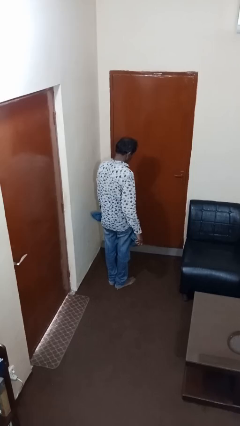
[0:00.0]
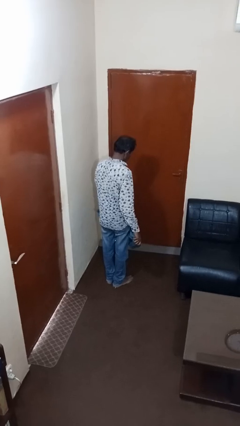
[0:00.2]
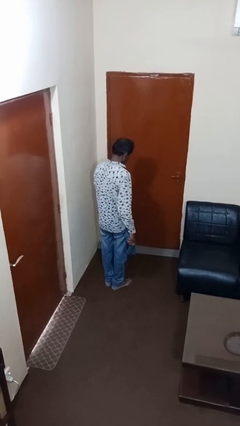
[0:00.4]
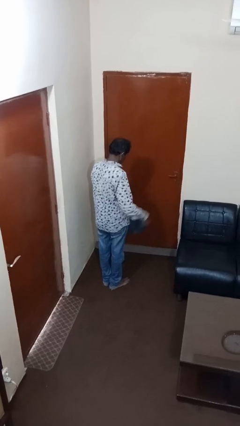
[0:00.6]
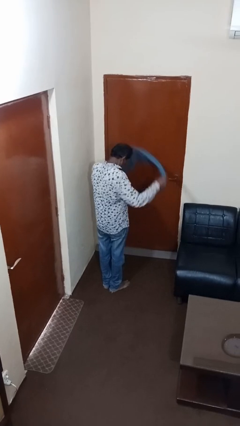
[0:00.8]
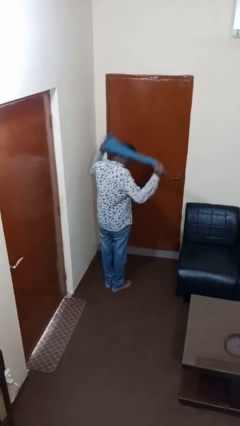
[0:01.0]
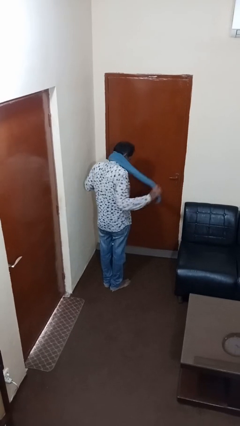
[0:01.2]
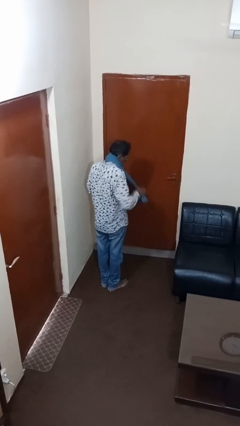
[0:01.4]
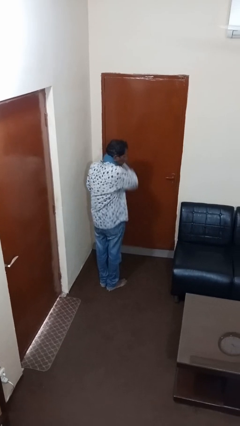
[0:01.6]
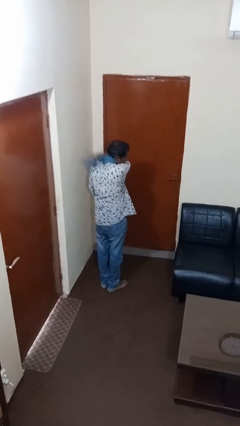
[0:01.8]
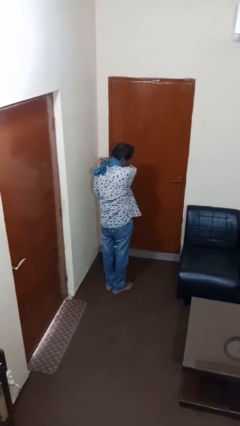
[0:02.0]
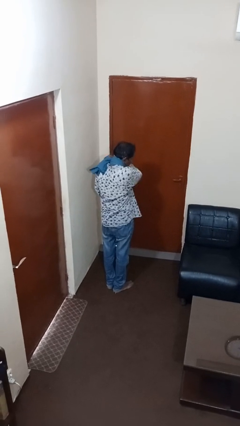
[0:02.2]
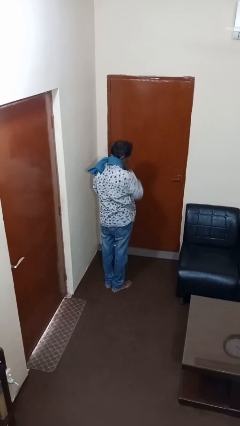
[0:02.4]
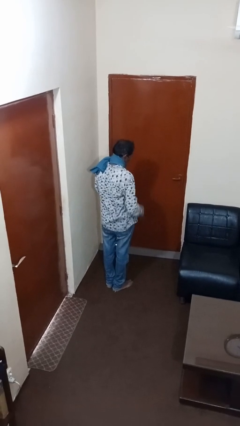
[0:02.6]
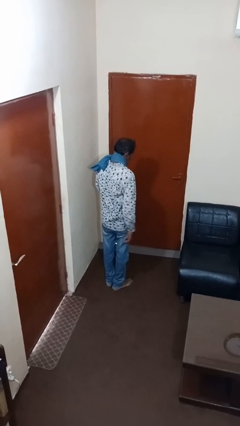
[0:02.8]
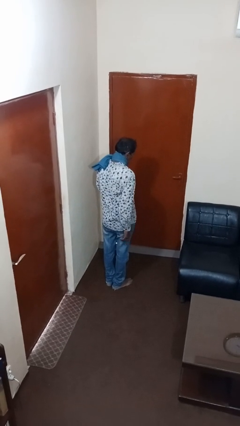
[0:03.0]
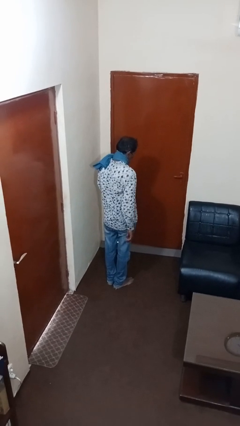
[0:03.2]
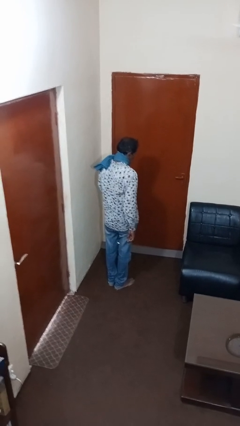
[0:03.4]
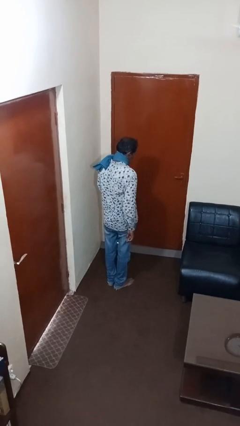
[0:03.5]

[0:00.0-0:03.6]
person puts on scarf

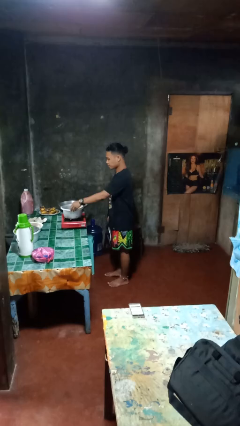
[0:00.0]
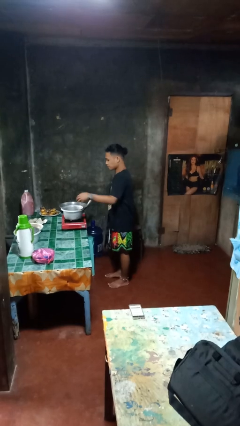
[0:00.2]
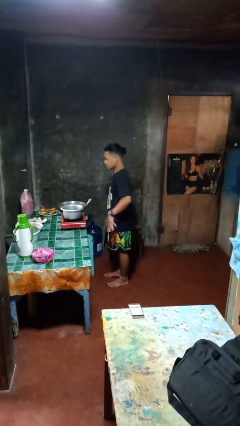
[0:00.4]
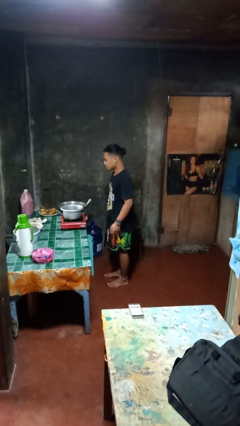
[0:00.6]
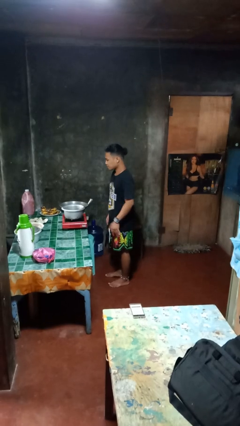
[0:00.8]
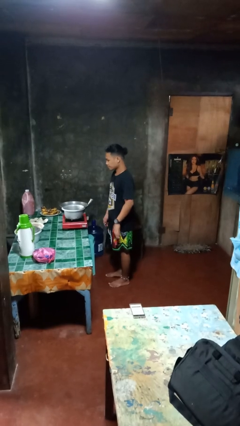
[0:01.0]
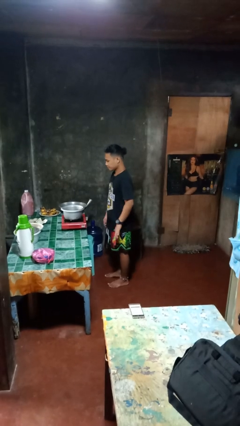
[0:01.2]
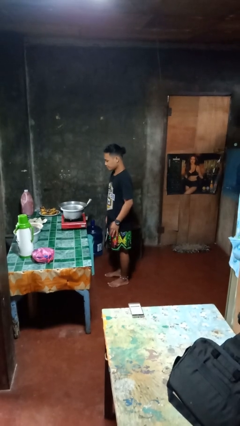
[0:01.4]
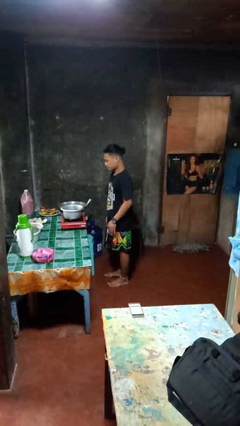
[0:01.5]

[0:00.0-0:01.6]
person burns hand

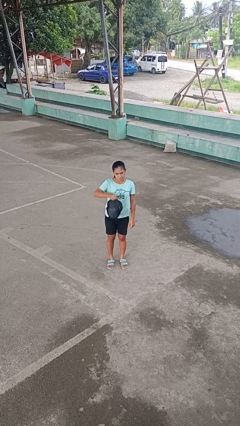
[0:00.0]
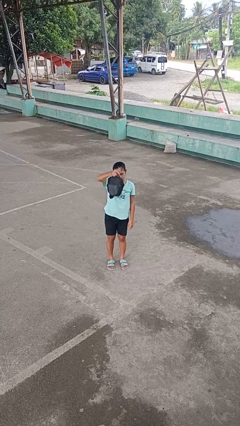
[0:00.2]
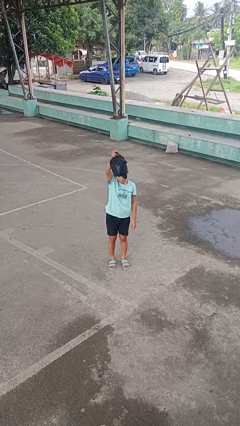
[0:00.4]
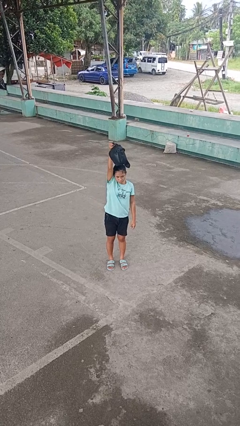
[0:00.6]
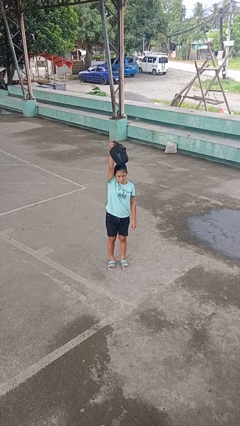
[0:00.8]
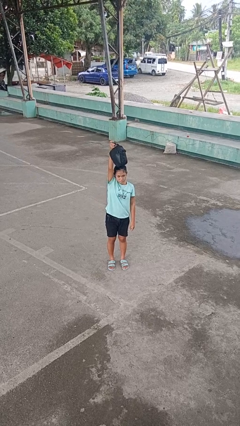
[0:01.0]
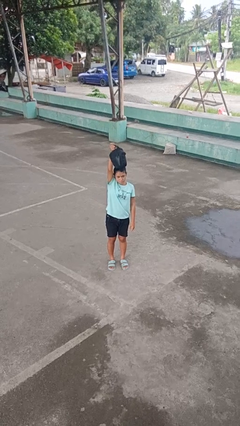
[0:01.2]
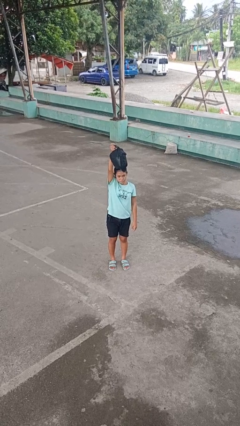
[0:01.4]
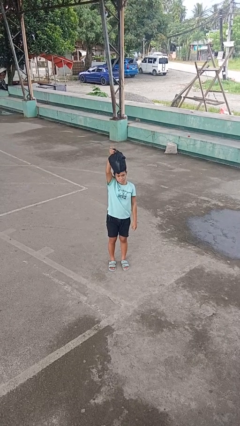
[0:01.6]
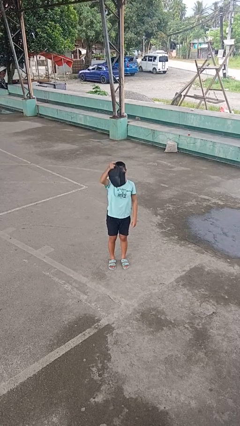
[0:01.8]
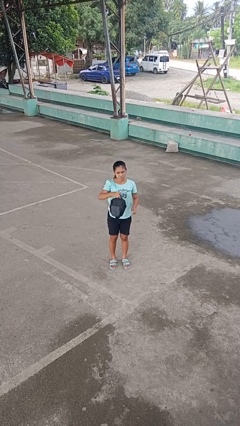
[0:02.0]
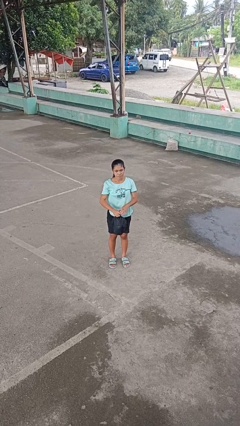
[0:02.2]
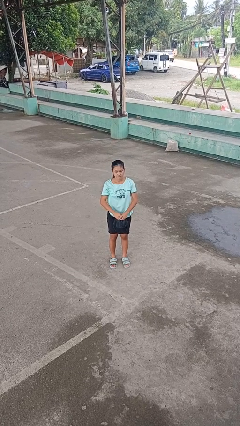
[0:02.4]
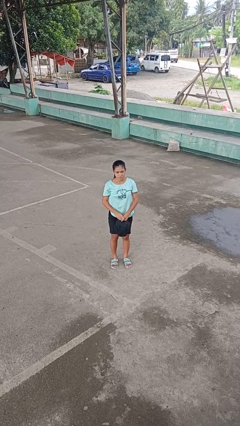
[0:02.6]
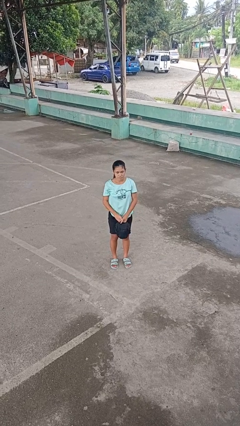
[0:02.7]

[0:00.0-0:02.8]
person holds object above head

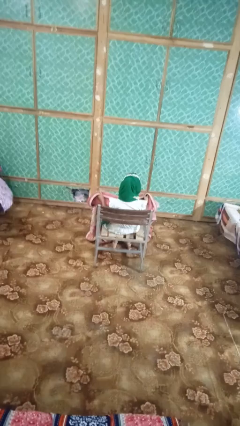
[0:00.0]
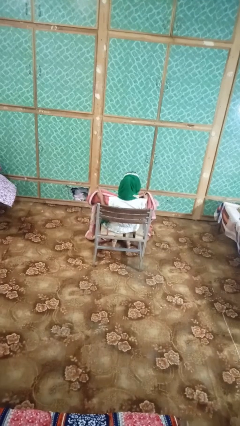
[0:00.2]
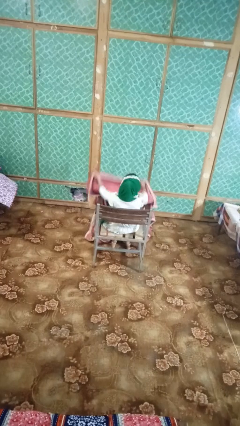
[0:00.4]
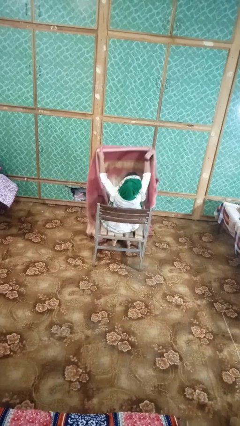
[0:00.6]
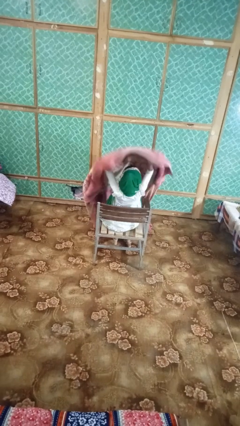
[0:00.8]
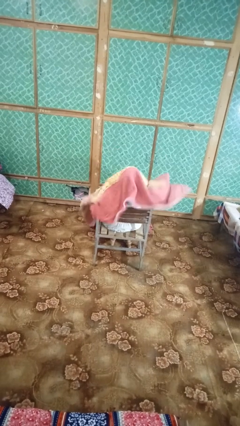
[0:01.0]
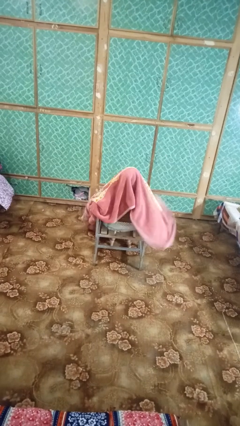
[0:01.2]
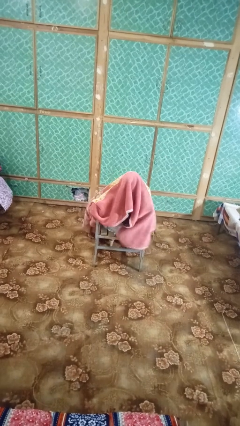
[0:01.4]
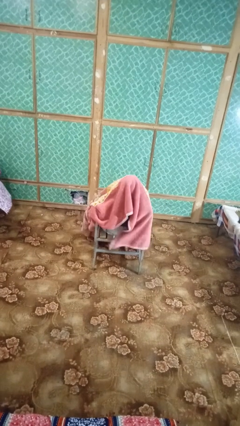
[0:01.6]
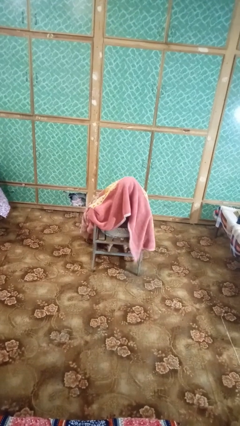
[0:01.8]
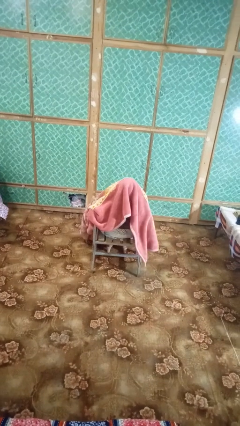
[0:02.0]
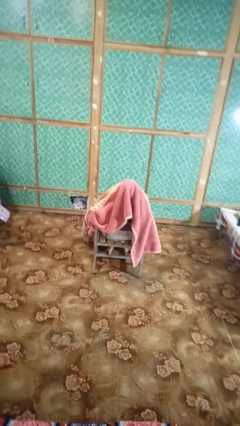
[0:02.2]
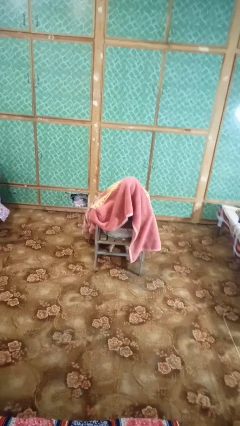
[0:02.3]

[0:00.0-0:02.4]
person covers with blanket

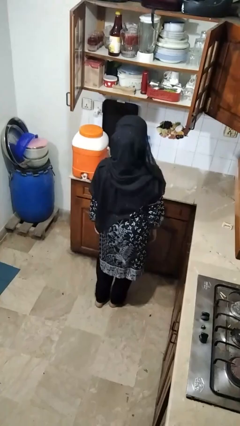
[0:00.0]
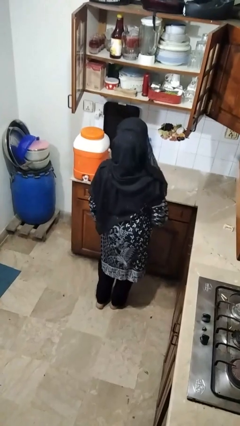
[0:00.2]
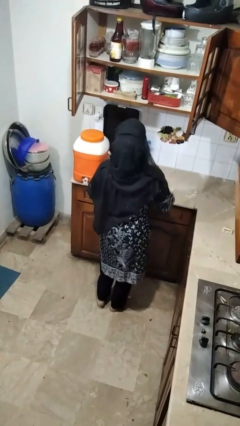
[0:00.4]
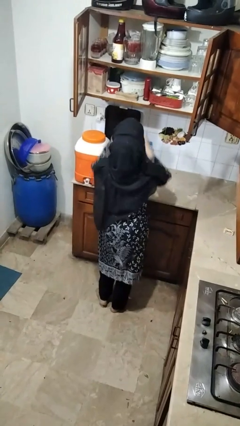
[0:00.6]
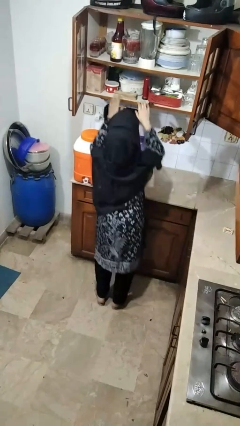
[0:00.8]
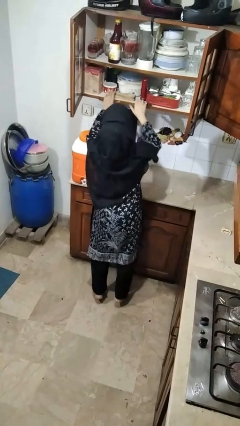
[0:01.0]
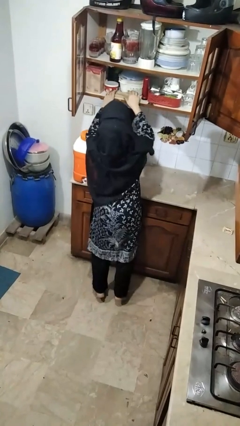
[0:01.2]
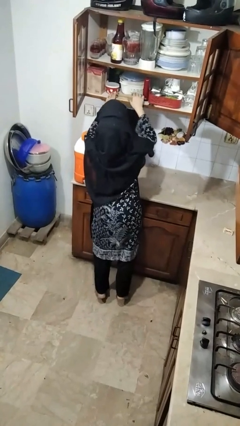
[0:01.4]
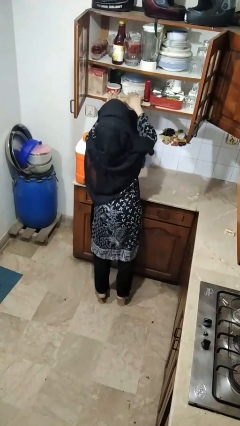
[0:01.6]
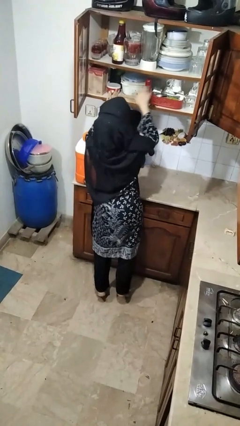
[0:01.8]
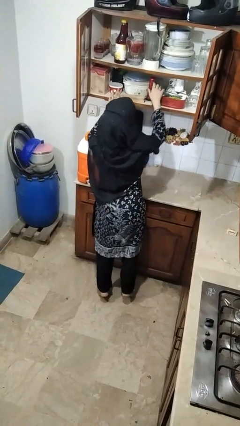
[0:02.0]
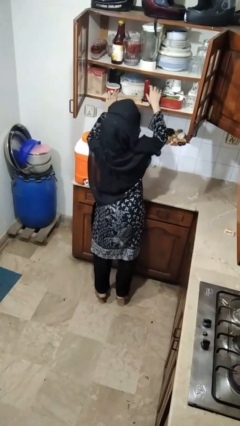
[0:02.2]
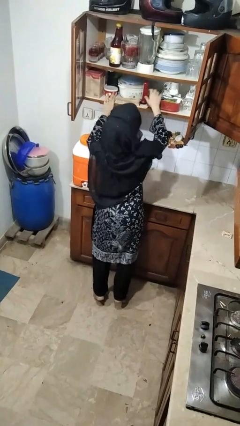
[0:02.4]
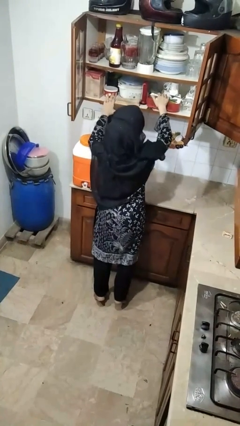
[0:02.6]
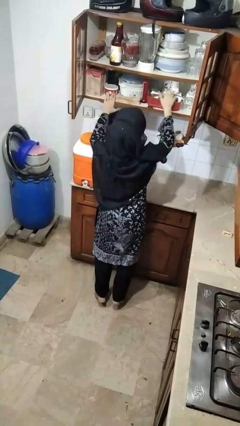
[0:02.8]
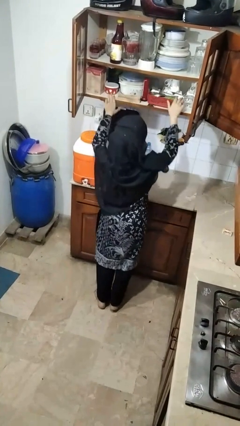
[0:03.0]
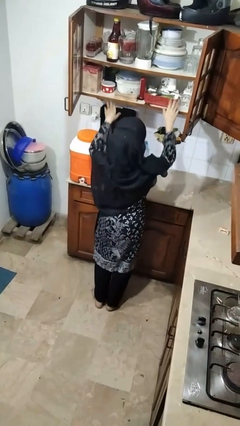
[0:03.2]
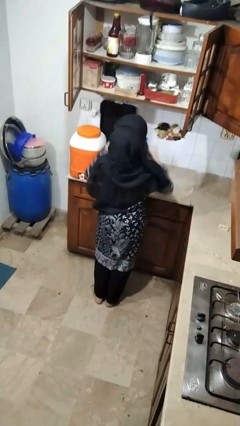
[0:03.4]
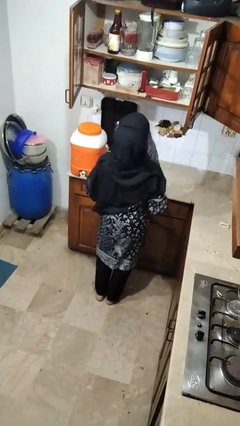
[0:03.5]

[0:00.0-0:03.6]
person searches in cabinet

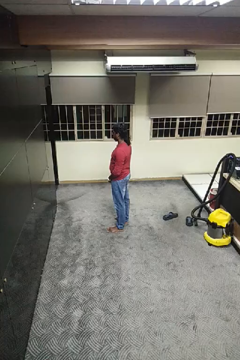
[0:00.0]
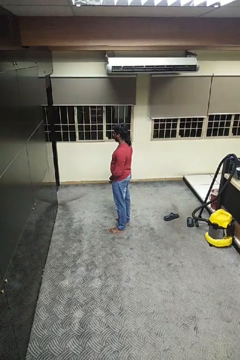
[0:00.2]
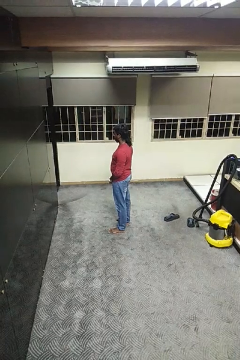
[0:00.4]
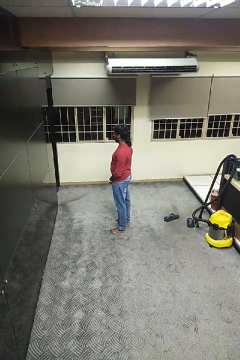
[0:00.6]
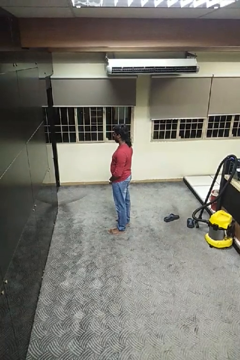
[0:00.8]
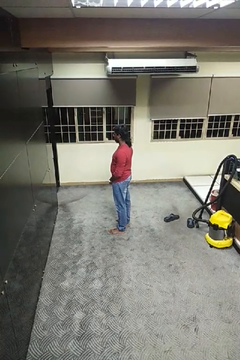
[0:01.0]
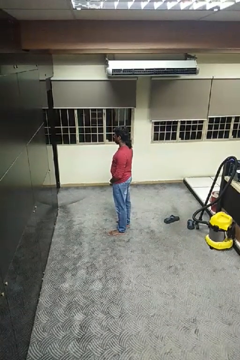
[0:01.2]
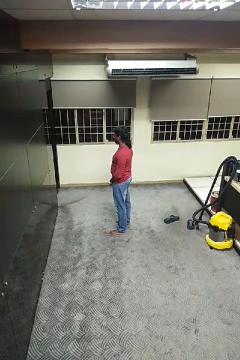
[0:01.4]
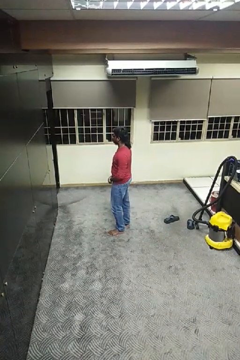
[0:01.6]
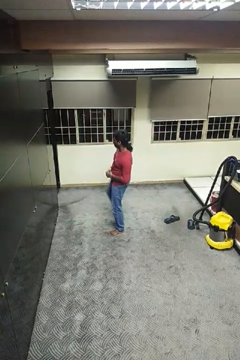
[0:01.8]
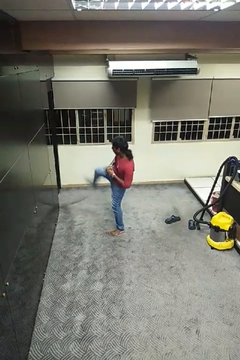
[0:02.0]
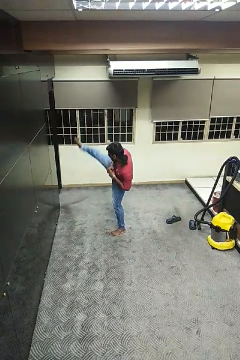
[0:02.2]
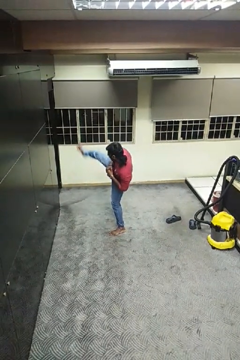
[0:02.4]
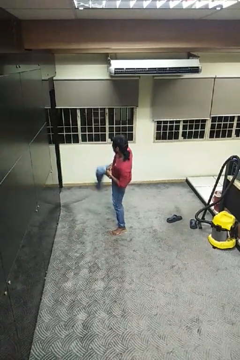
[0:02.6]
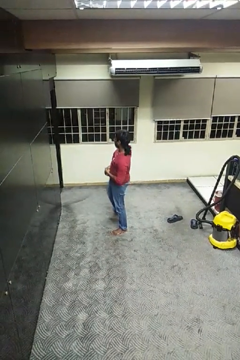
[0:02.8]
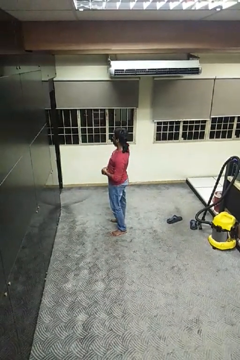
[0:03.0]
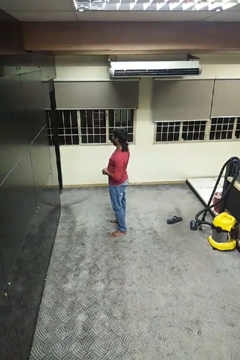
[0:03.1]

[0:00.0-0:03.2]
person karate kicks

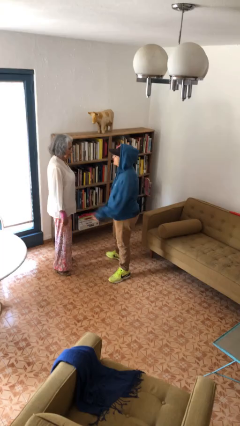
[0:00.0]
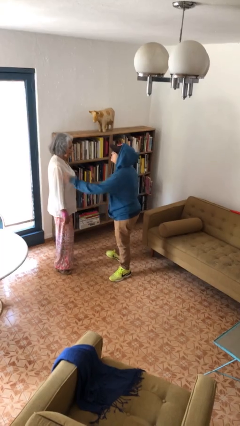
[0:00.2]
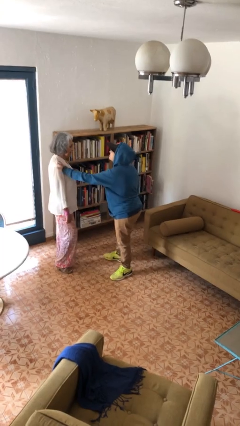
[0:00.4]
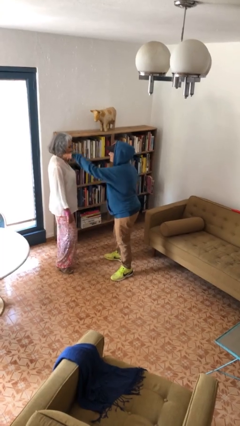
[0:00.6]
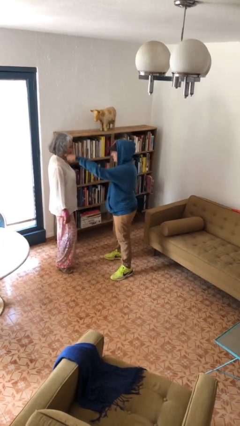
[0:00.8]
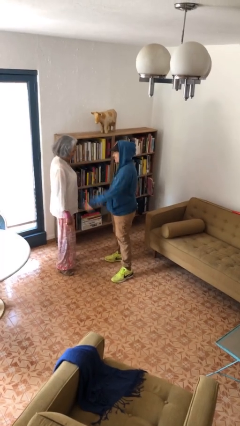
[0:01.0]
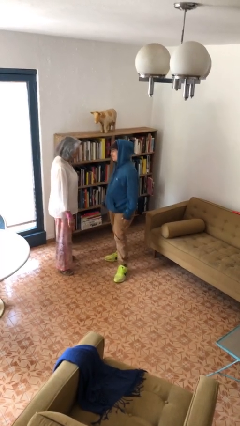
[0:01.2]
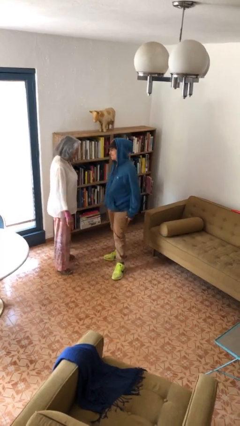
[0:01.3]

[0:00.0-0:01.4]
person shoves person
